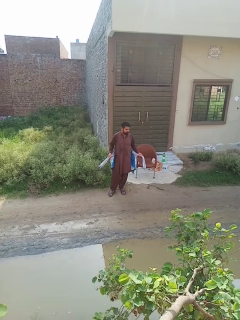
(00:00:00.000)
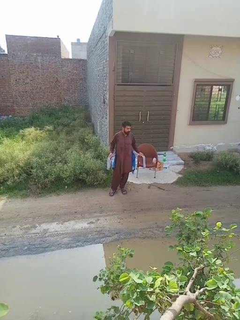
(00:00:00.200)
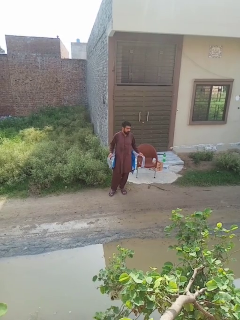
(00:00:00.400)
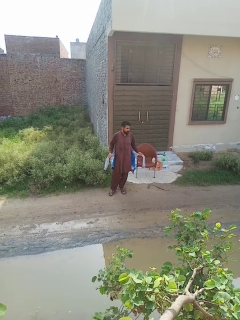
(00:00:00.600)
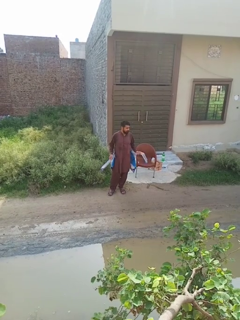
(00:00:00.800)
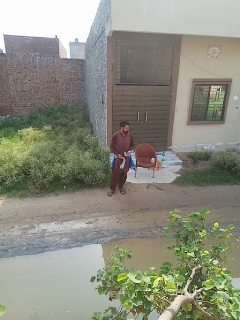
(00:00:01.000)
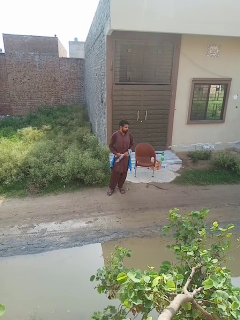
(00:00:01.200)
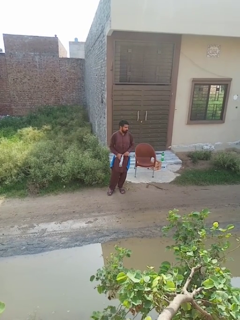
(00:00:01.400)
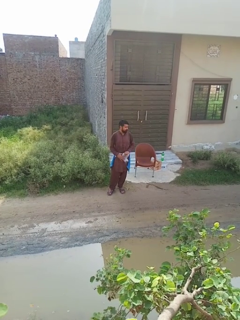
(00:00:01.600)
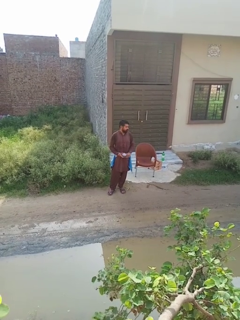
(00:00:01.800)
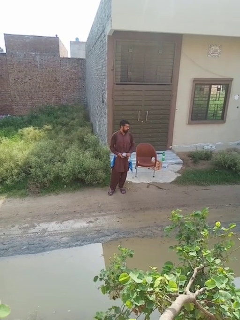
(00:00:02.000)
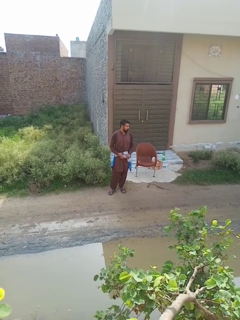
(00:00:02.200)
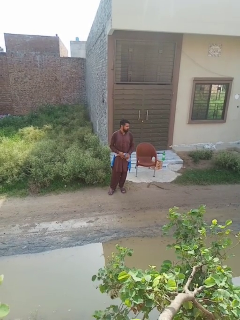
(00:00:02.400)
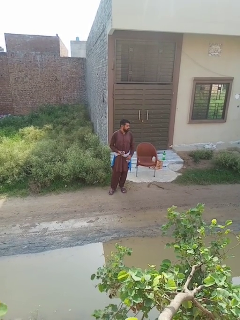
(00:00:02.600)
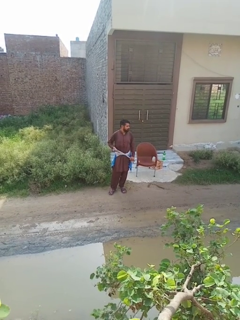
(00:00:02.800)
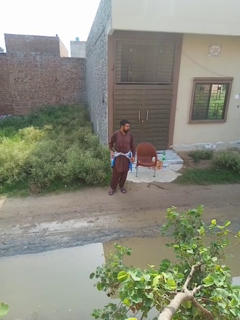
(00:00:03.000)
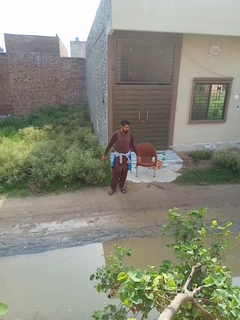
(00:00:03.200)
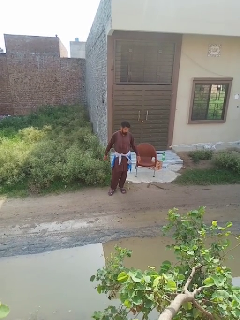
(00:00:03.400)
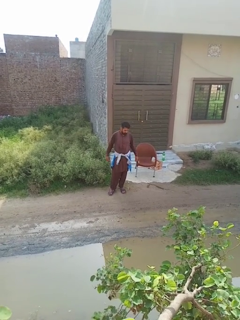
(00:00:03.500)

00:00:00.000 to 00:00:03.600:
person ties jacket around waist

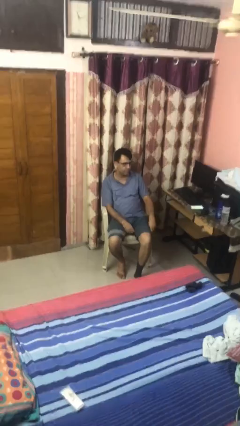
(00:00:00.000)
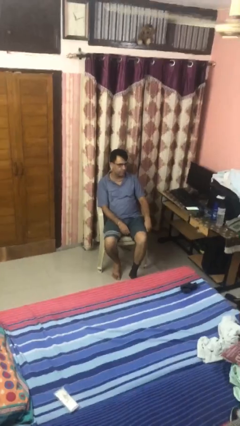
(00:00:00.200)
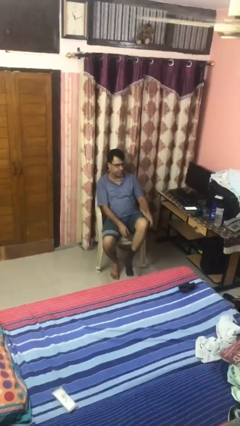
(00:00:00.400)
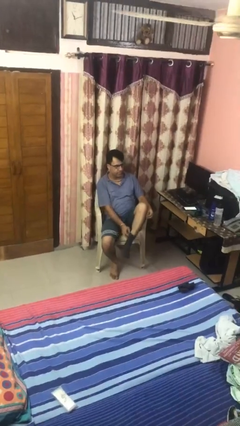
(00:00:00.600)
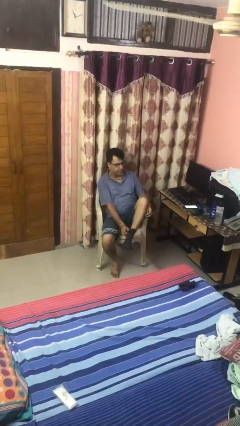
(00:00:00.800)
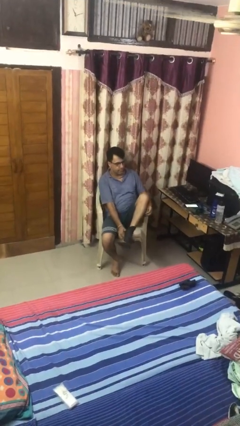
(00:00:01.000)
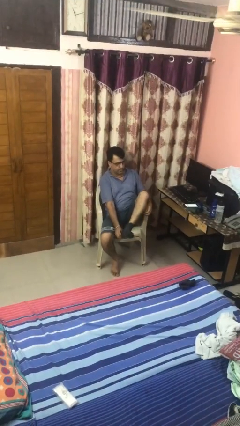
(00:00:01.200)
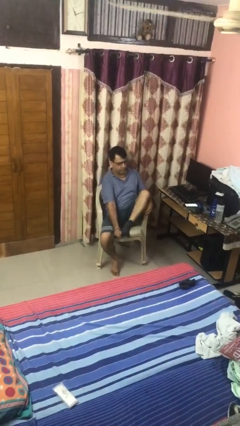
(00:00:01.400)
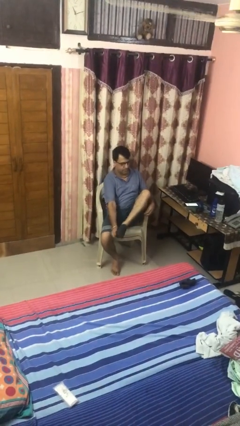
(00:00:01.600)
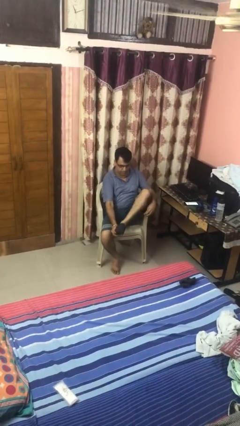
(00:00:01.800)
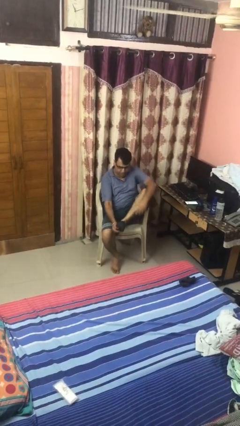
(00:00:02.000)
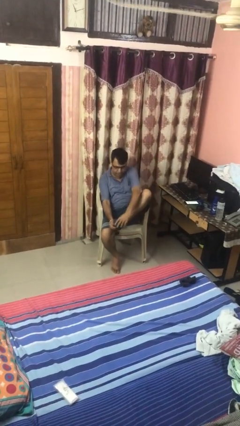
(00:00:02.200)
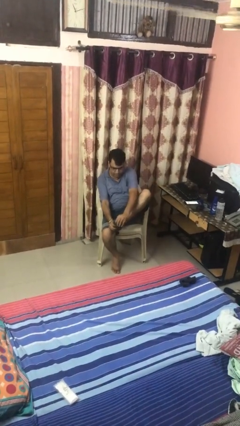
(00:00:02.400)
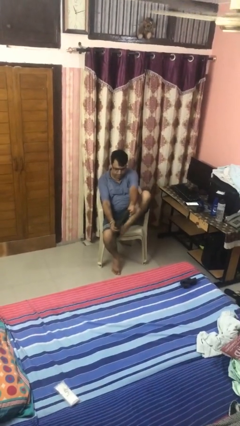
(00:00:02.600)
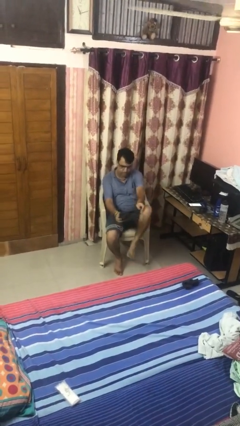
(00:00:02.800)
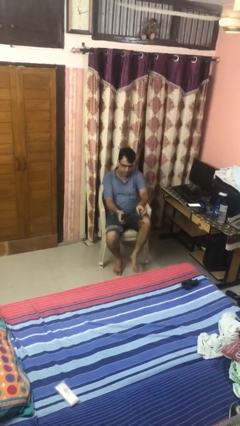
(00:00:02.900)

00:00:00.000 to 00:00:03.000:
person takes off socks

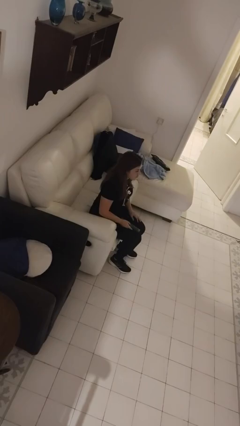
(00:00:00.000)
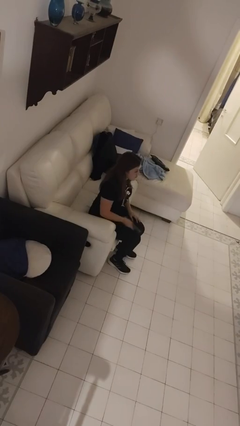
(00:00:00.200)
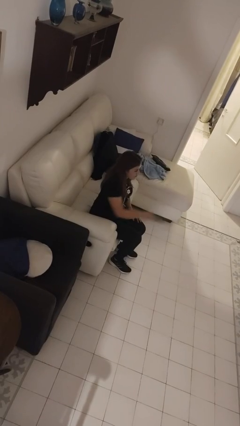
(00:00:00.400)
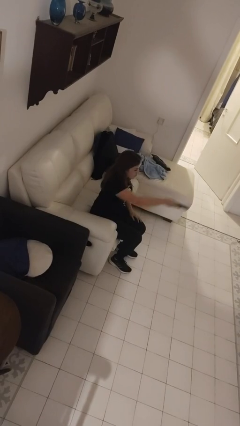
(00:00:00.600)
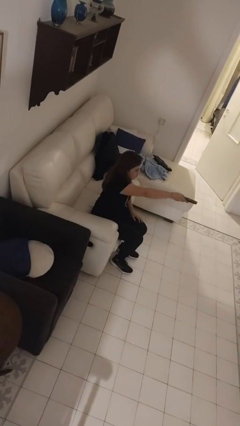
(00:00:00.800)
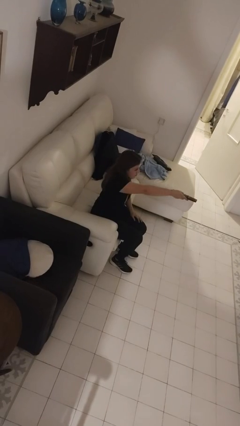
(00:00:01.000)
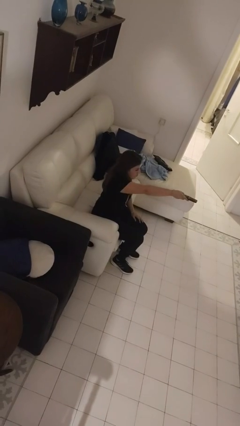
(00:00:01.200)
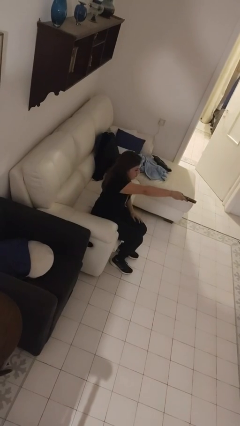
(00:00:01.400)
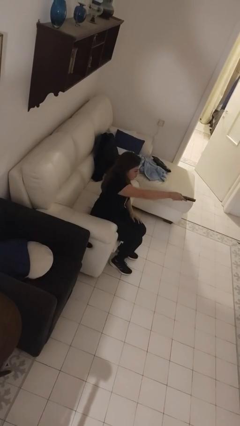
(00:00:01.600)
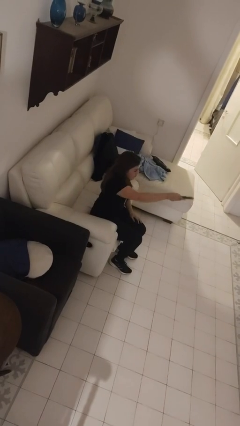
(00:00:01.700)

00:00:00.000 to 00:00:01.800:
person uses television remote

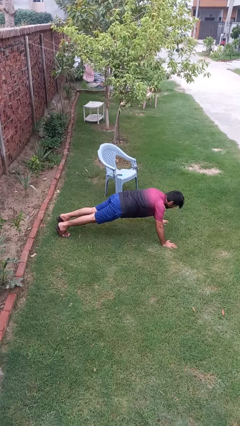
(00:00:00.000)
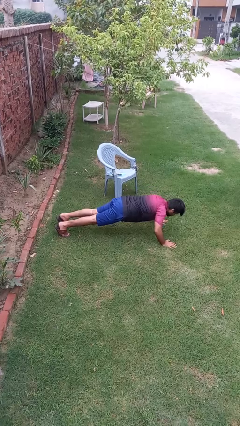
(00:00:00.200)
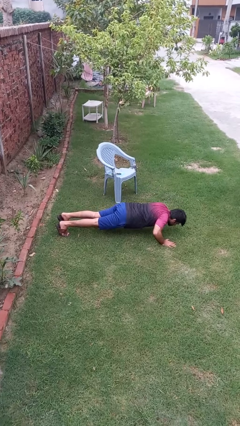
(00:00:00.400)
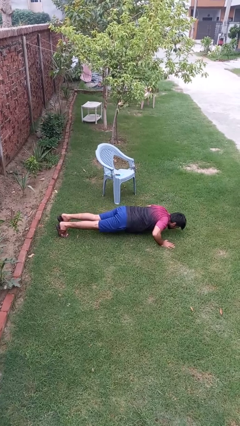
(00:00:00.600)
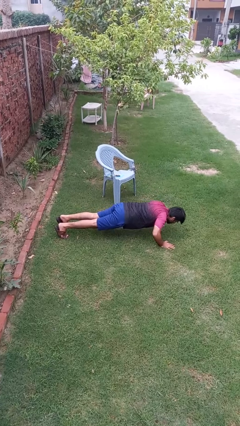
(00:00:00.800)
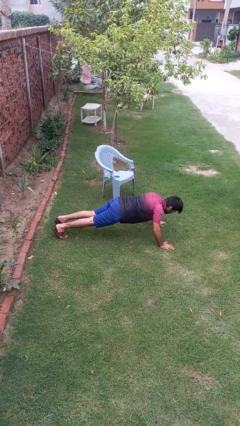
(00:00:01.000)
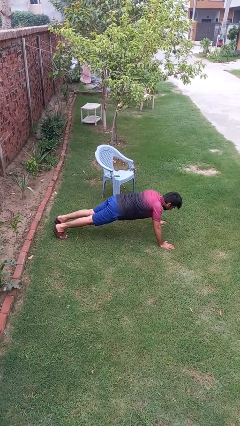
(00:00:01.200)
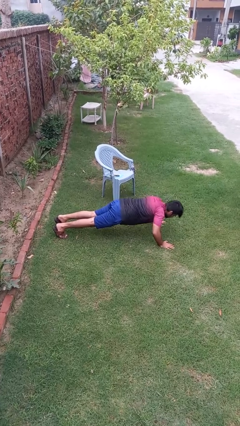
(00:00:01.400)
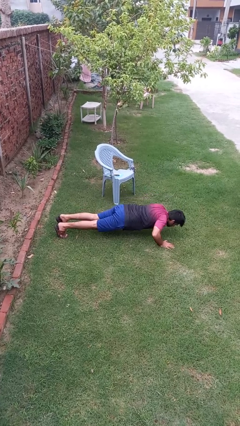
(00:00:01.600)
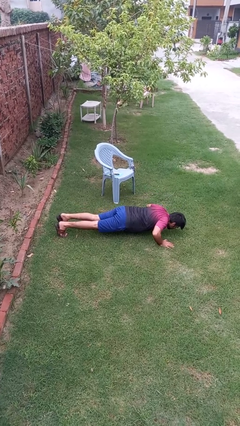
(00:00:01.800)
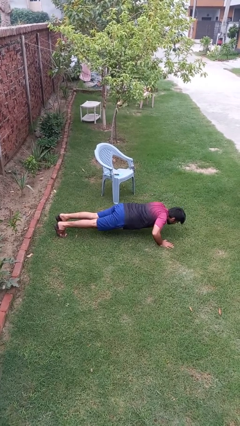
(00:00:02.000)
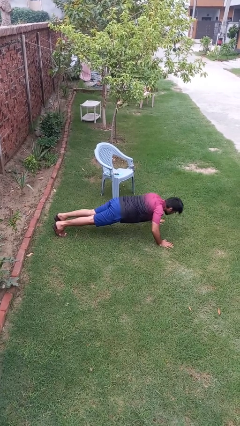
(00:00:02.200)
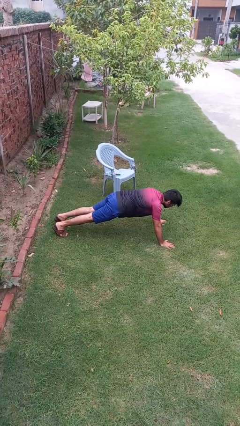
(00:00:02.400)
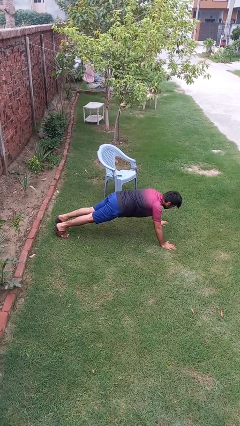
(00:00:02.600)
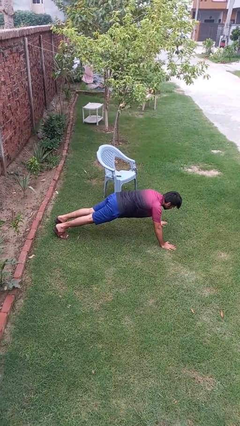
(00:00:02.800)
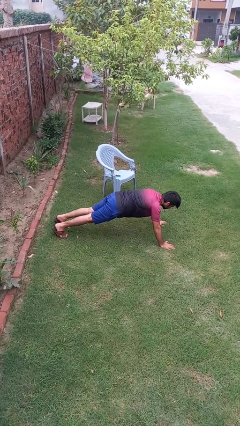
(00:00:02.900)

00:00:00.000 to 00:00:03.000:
person exercises with pushup

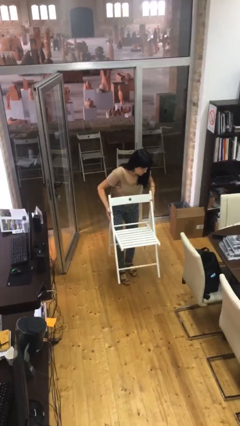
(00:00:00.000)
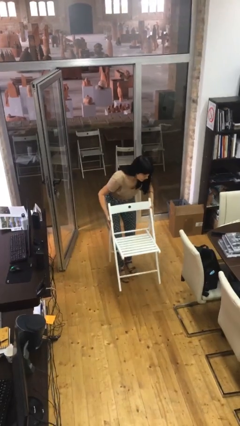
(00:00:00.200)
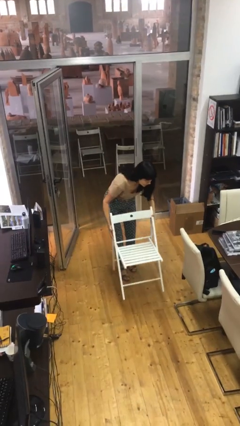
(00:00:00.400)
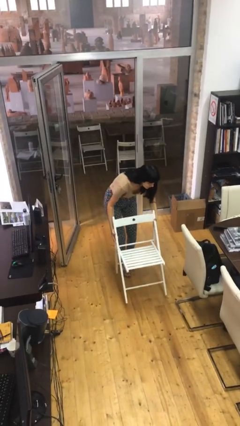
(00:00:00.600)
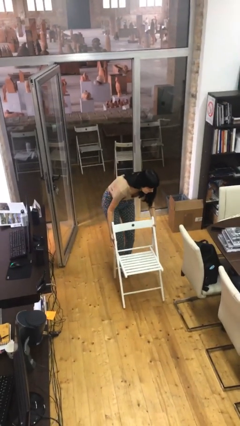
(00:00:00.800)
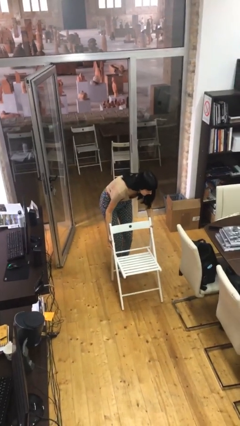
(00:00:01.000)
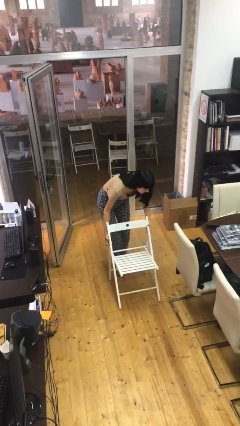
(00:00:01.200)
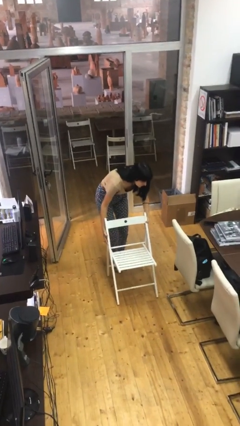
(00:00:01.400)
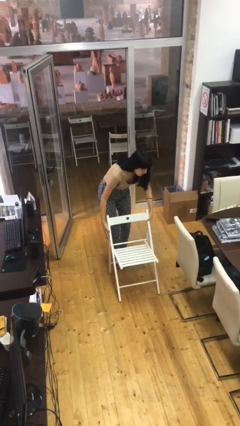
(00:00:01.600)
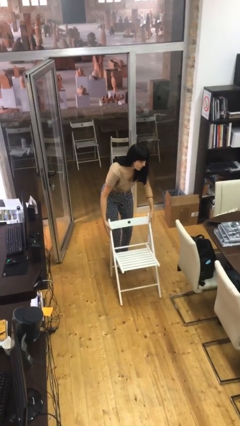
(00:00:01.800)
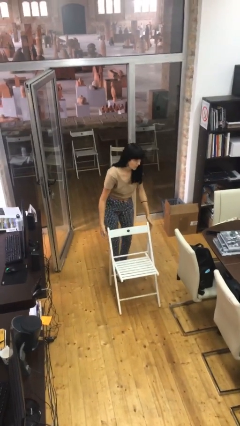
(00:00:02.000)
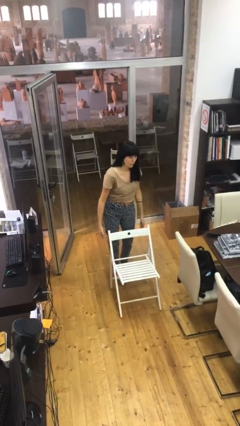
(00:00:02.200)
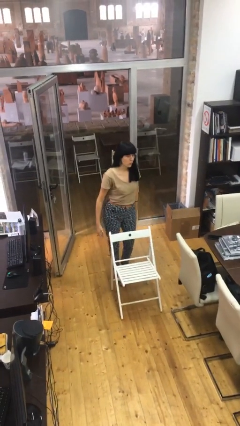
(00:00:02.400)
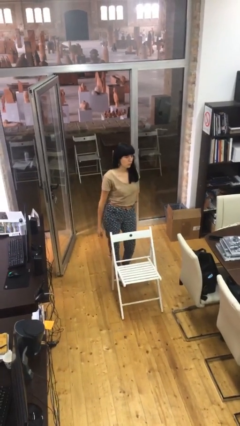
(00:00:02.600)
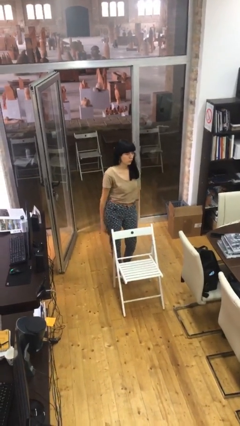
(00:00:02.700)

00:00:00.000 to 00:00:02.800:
person puts down object on floor

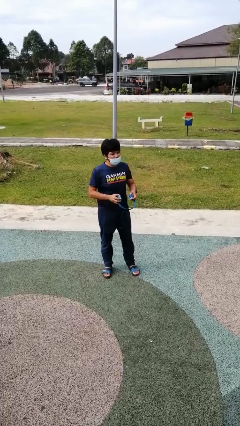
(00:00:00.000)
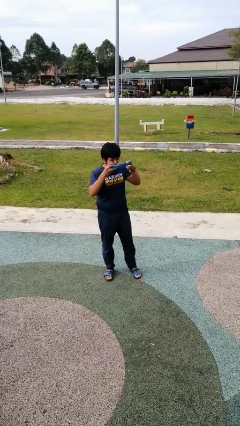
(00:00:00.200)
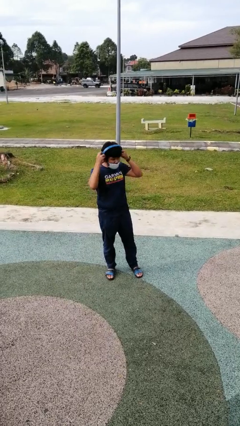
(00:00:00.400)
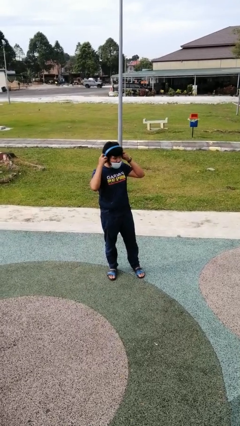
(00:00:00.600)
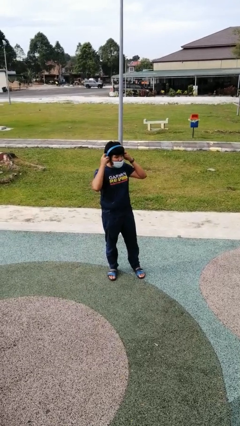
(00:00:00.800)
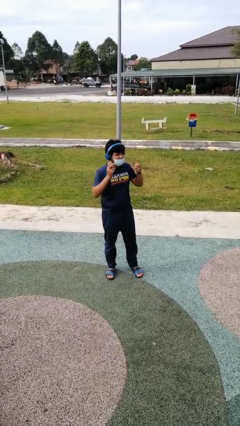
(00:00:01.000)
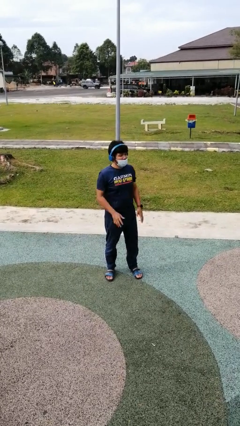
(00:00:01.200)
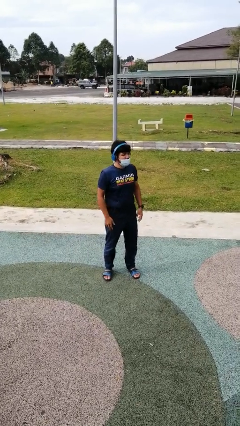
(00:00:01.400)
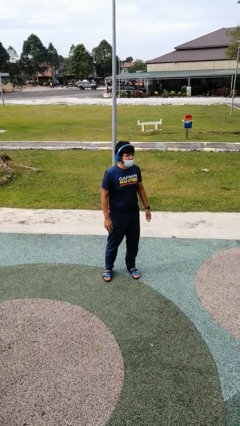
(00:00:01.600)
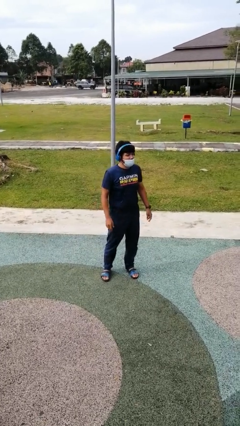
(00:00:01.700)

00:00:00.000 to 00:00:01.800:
person puts on headphones

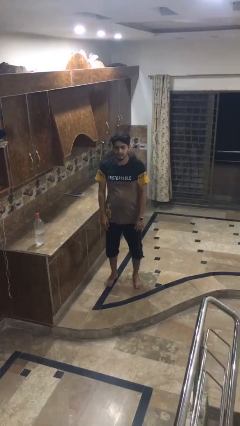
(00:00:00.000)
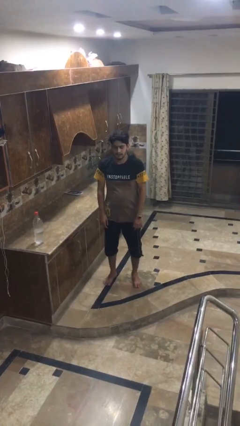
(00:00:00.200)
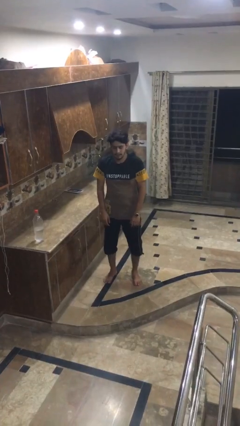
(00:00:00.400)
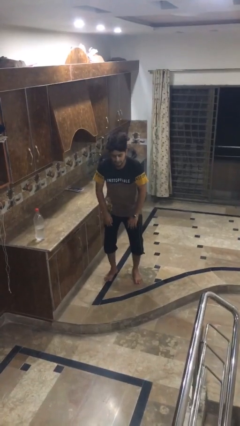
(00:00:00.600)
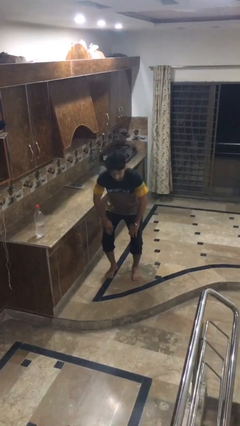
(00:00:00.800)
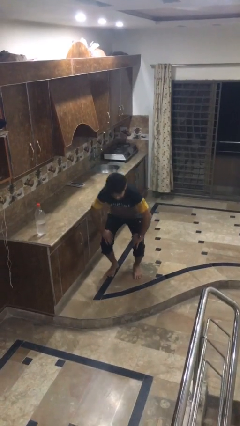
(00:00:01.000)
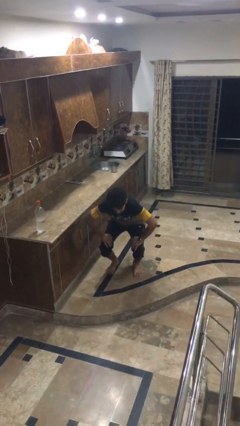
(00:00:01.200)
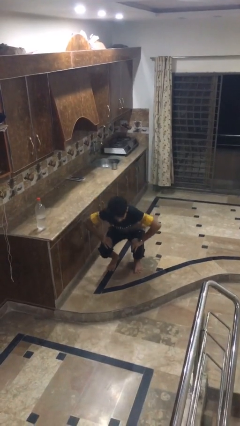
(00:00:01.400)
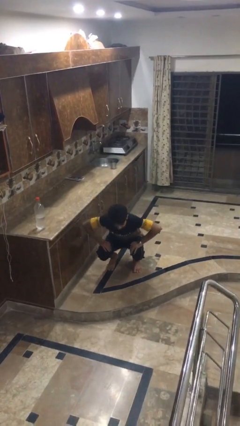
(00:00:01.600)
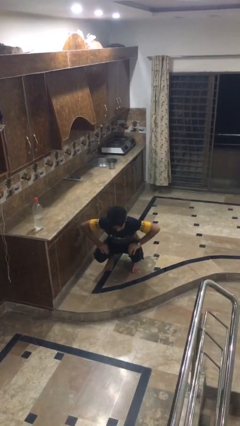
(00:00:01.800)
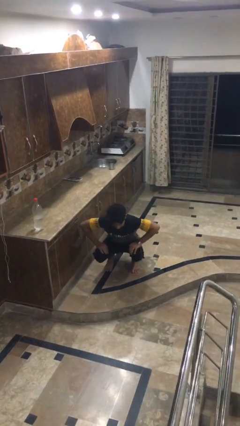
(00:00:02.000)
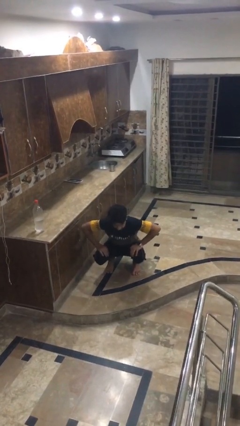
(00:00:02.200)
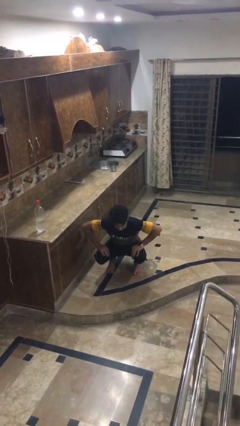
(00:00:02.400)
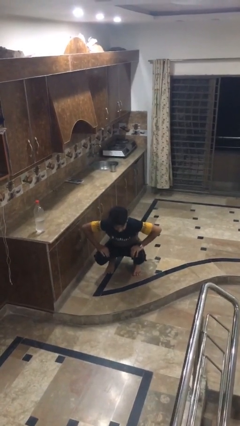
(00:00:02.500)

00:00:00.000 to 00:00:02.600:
person squats
